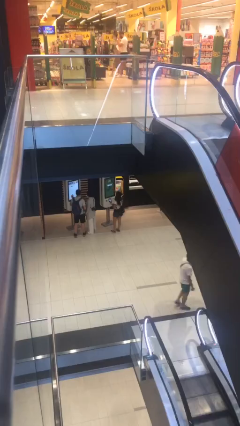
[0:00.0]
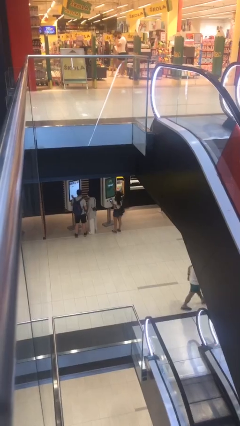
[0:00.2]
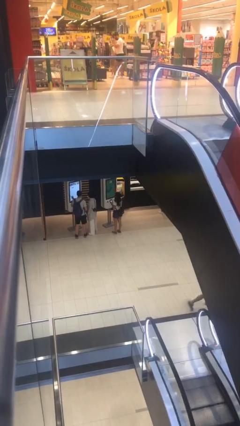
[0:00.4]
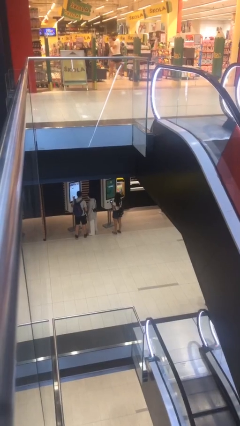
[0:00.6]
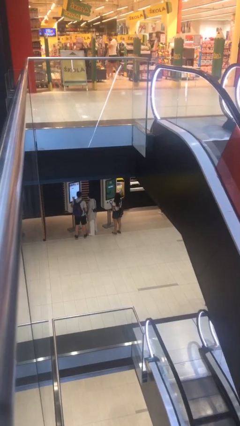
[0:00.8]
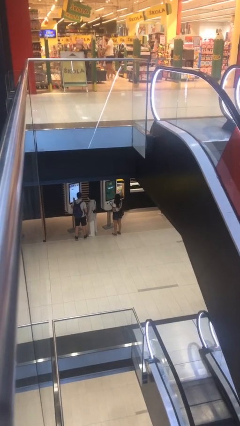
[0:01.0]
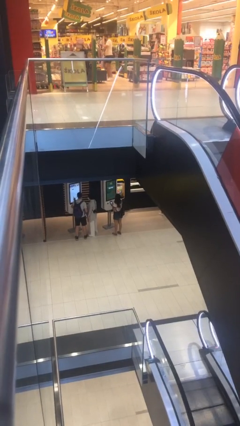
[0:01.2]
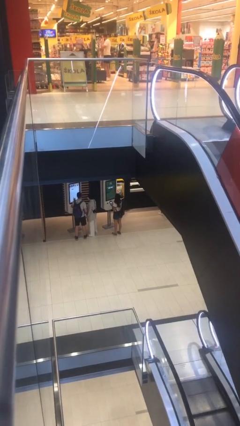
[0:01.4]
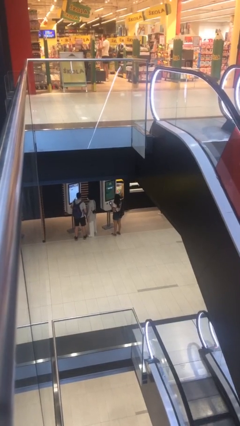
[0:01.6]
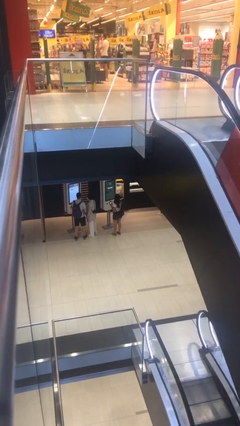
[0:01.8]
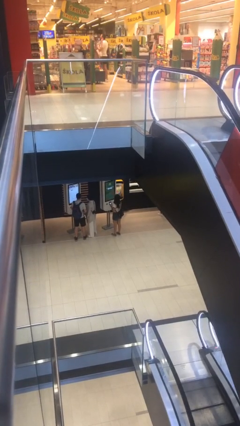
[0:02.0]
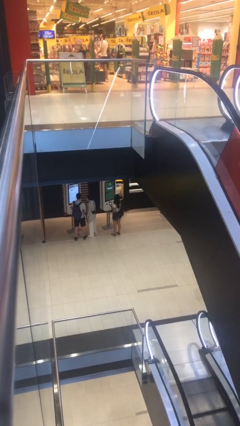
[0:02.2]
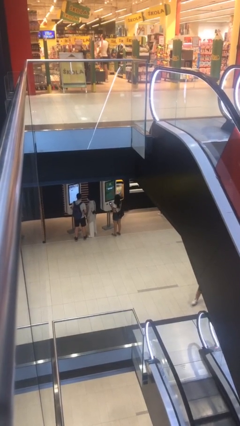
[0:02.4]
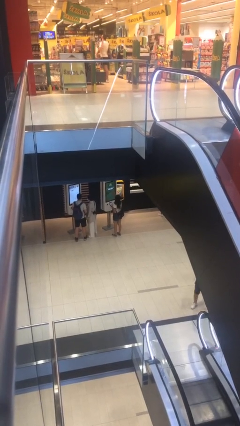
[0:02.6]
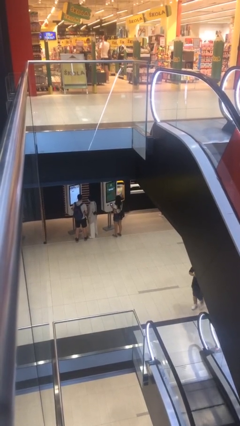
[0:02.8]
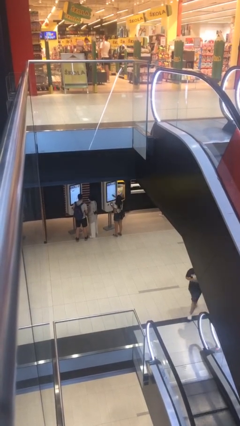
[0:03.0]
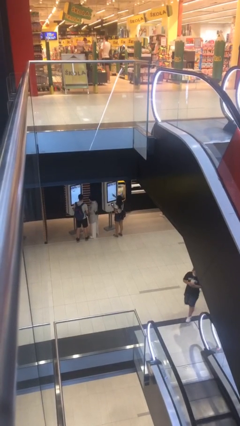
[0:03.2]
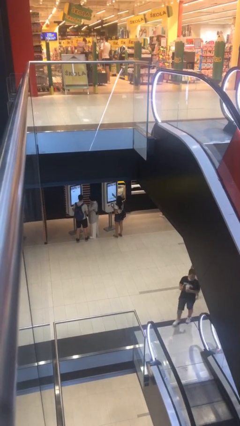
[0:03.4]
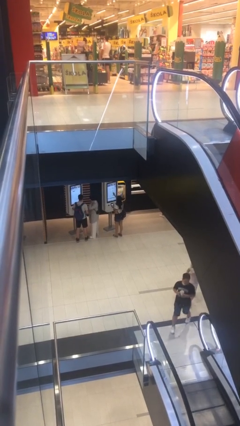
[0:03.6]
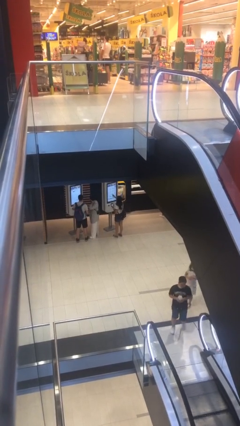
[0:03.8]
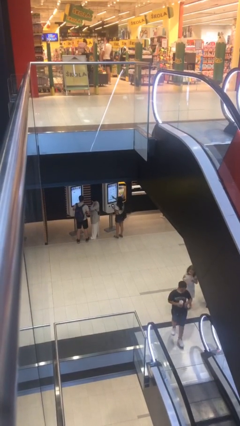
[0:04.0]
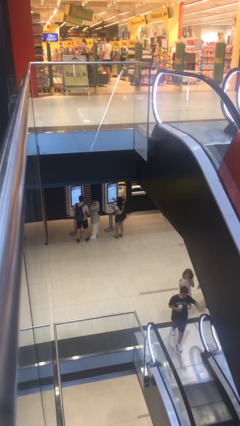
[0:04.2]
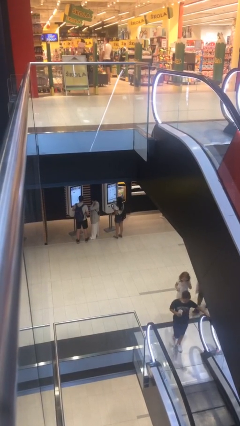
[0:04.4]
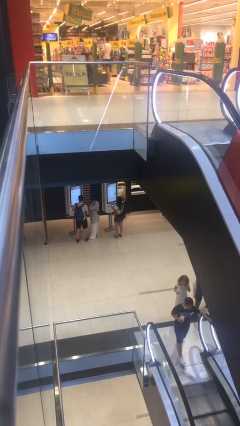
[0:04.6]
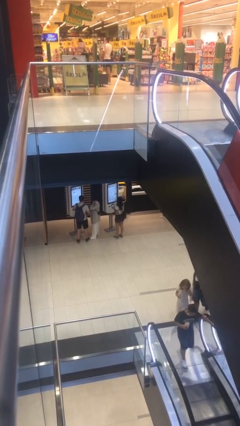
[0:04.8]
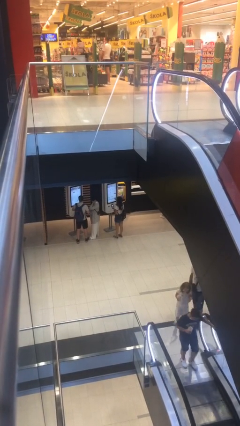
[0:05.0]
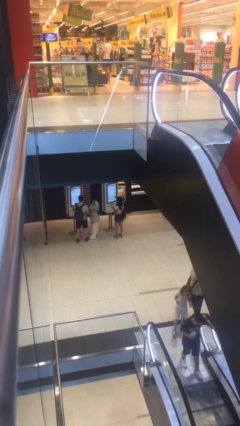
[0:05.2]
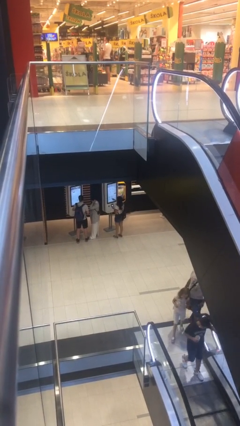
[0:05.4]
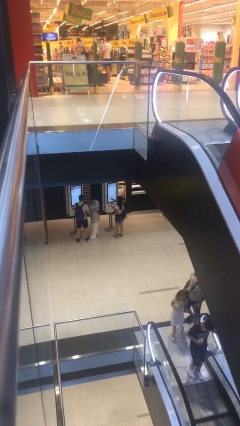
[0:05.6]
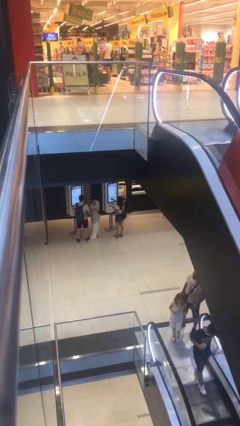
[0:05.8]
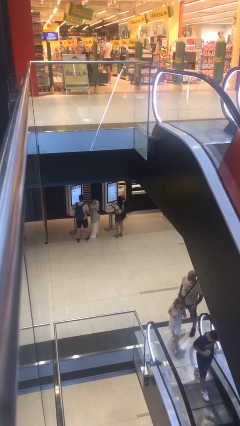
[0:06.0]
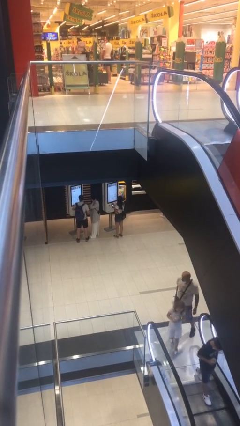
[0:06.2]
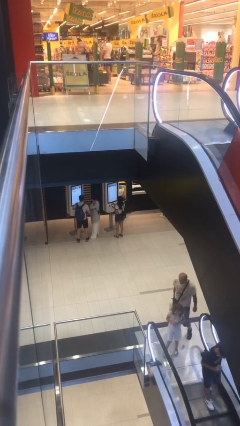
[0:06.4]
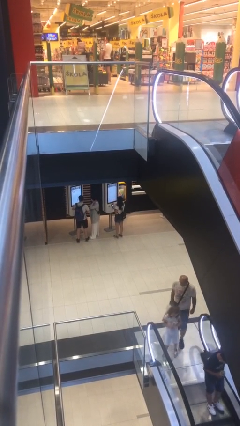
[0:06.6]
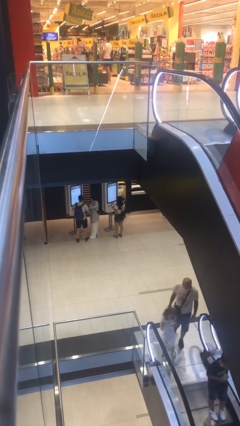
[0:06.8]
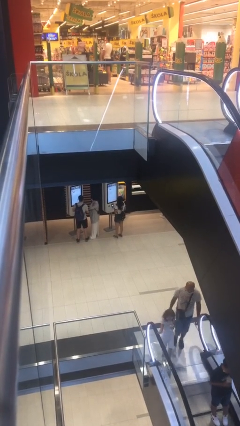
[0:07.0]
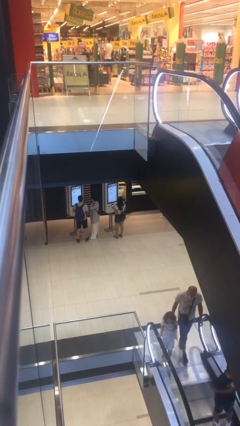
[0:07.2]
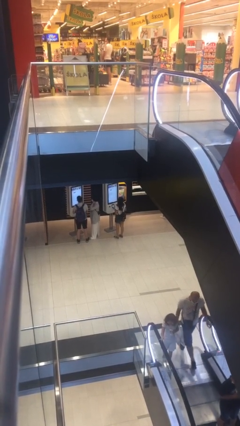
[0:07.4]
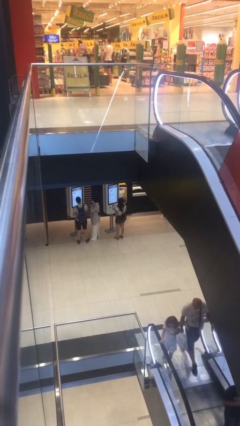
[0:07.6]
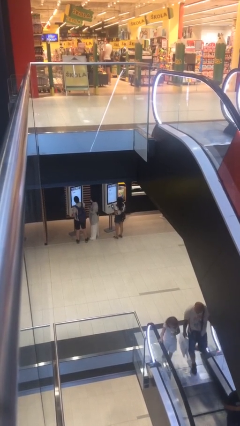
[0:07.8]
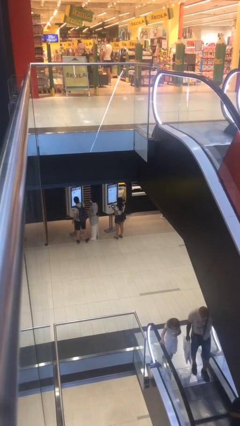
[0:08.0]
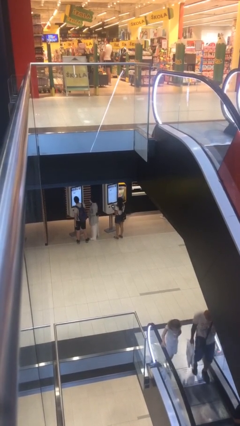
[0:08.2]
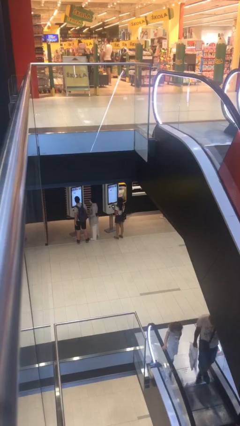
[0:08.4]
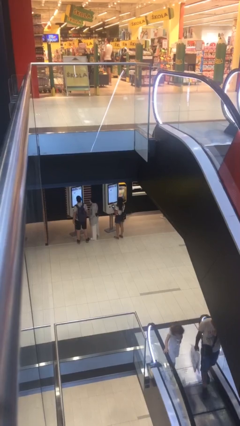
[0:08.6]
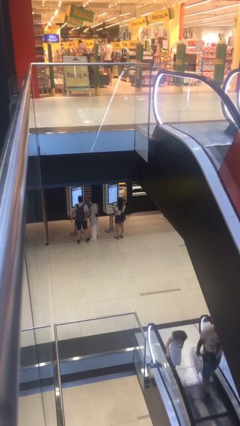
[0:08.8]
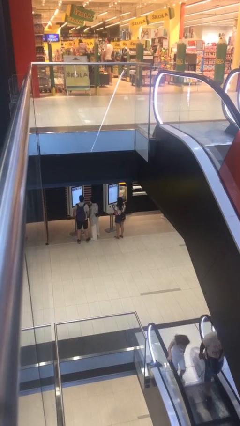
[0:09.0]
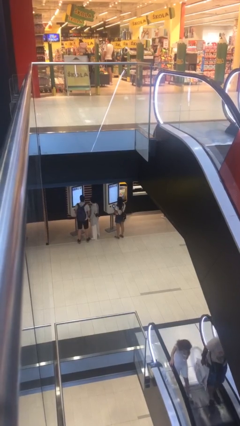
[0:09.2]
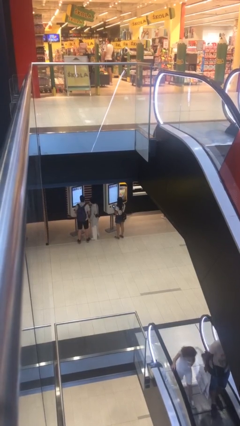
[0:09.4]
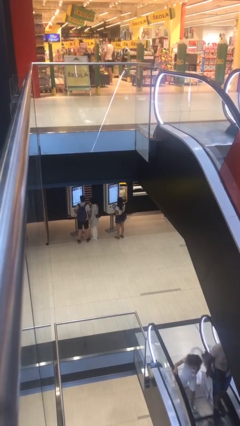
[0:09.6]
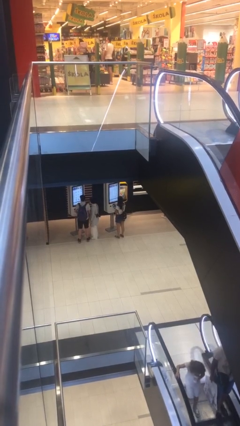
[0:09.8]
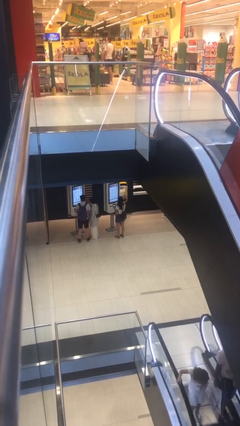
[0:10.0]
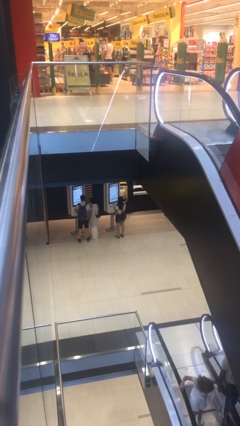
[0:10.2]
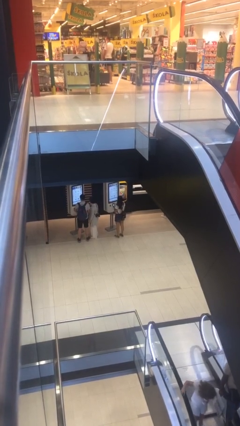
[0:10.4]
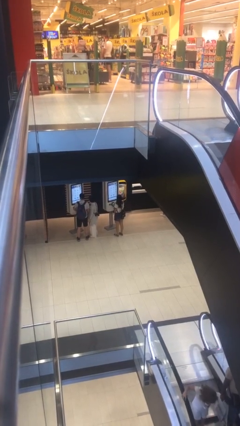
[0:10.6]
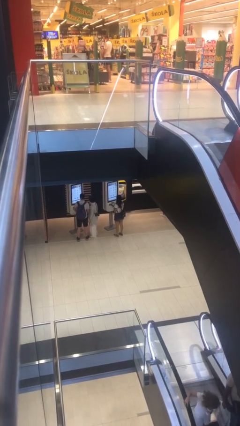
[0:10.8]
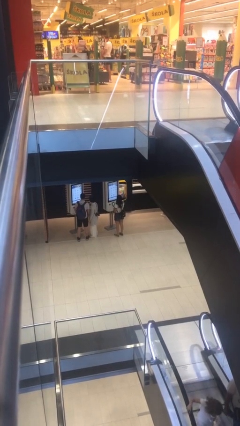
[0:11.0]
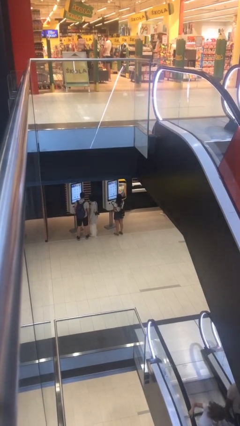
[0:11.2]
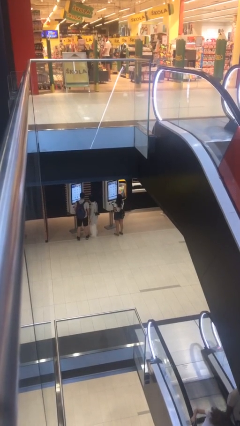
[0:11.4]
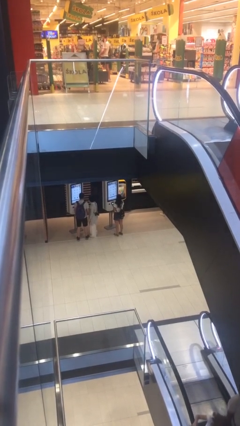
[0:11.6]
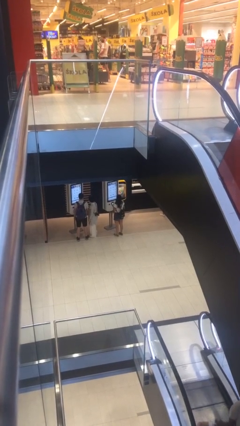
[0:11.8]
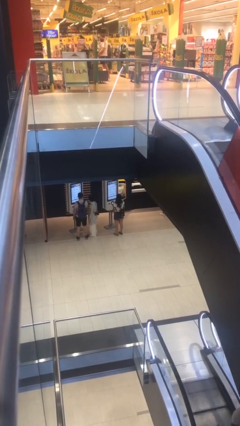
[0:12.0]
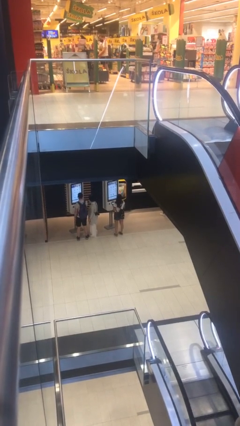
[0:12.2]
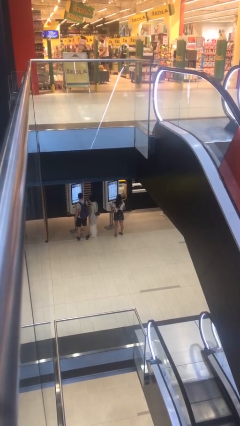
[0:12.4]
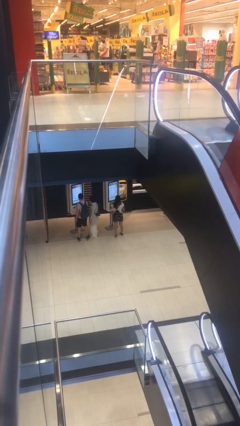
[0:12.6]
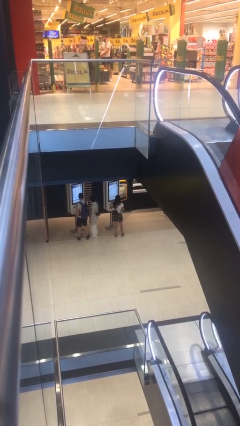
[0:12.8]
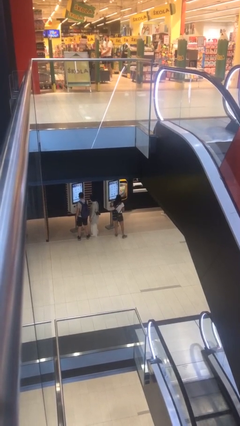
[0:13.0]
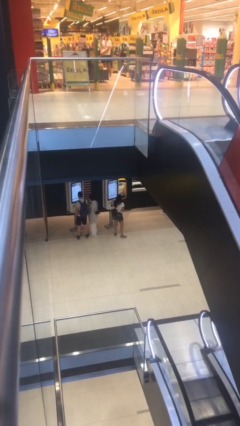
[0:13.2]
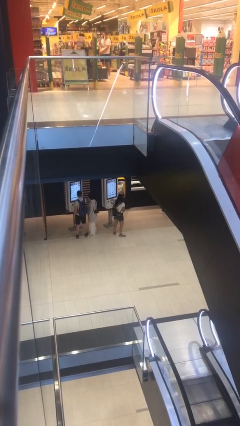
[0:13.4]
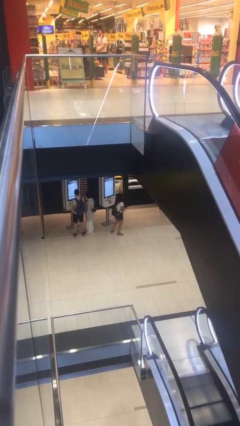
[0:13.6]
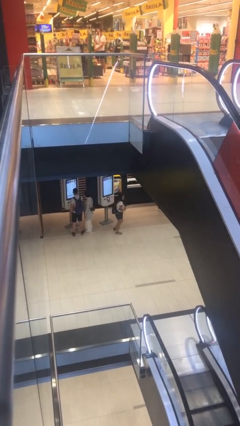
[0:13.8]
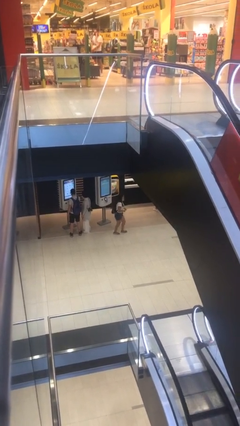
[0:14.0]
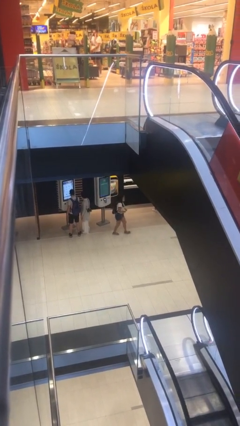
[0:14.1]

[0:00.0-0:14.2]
person purchases from machine

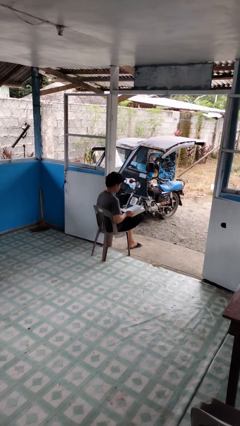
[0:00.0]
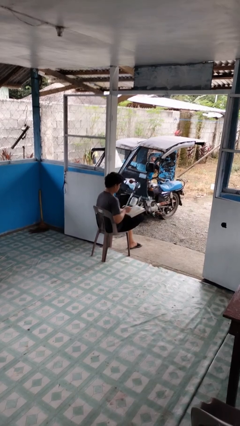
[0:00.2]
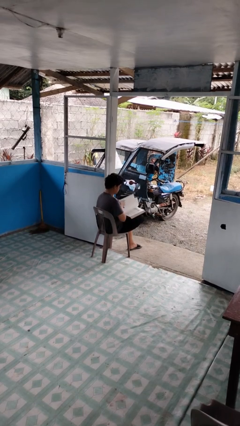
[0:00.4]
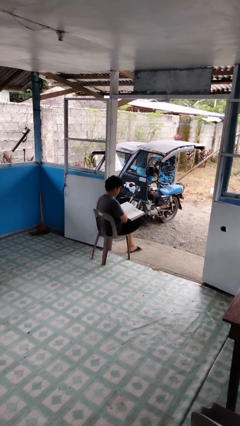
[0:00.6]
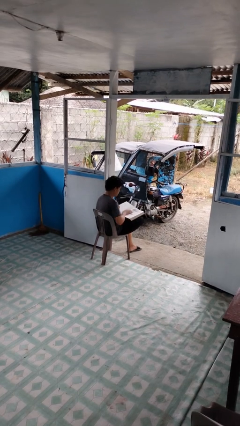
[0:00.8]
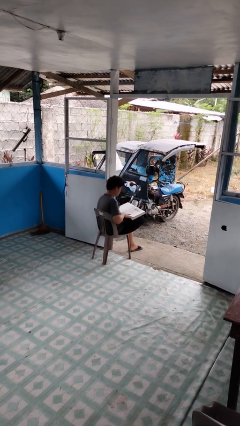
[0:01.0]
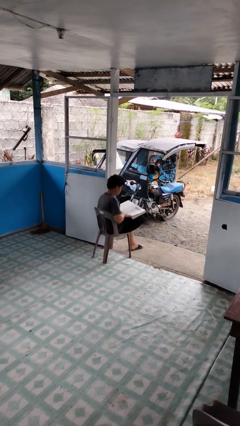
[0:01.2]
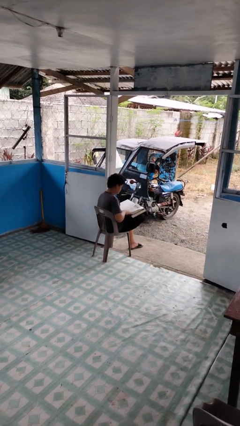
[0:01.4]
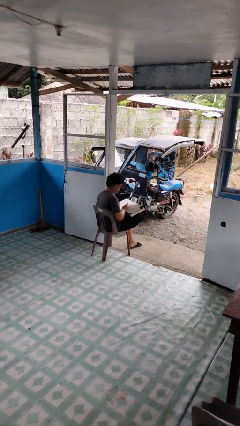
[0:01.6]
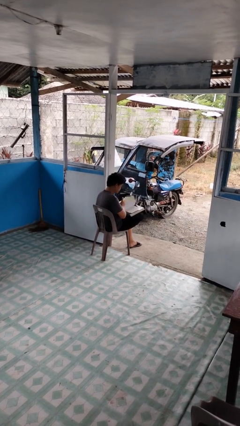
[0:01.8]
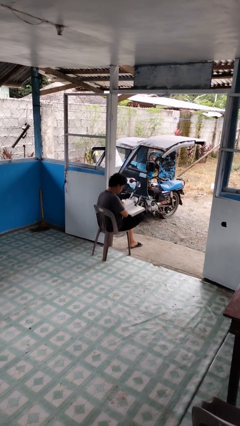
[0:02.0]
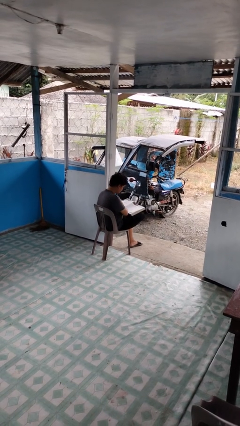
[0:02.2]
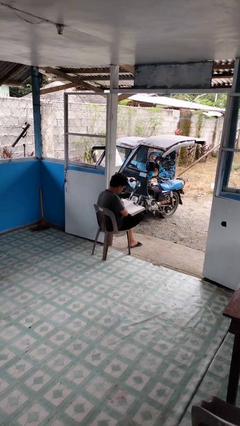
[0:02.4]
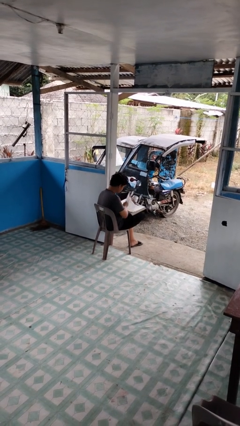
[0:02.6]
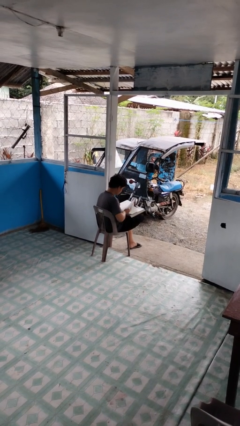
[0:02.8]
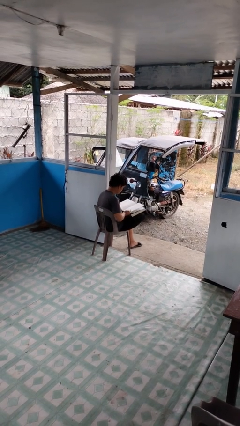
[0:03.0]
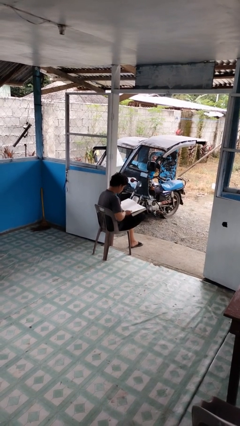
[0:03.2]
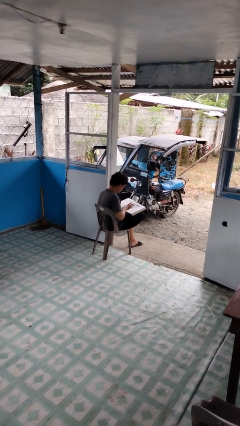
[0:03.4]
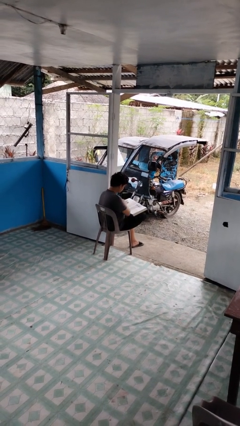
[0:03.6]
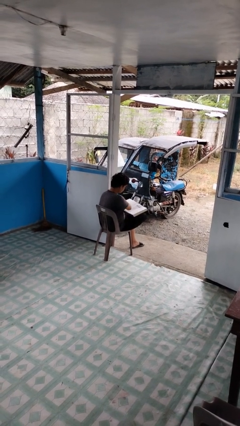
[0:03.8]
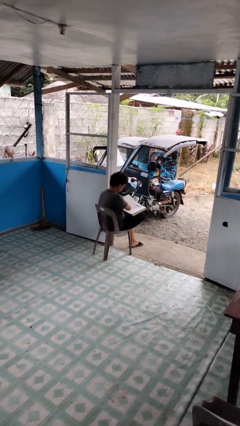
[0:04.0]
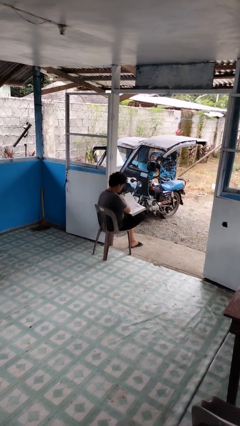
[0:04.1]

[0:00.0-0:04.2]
person reads book
